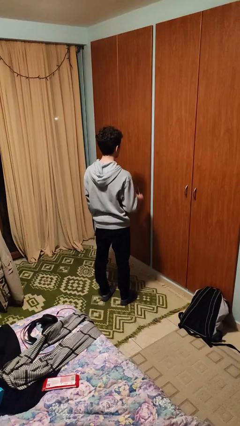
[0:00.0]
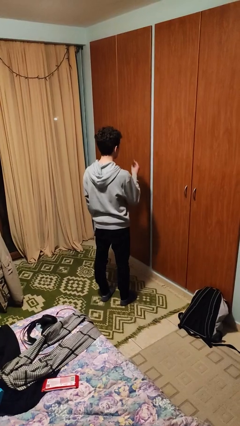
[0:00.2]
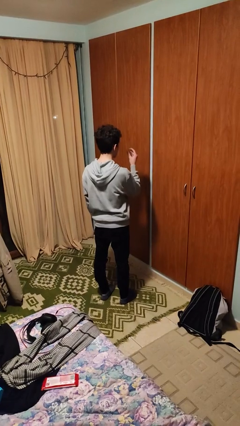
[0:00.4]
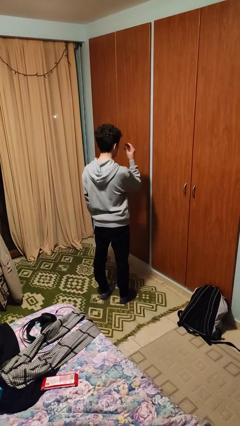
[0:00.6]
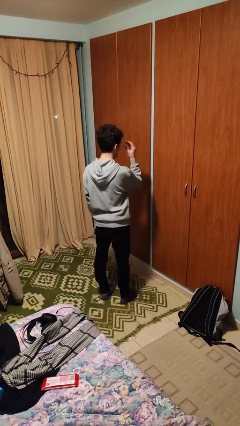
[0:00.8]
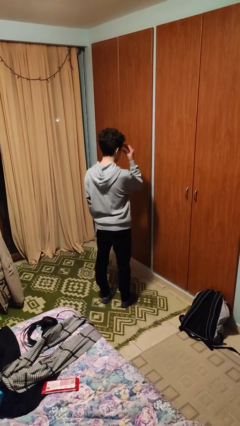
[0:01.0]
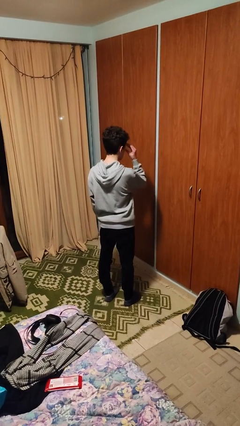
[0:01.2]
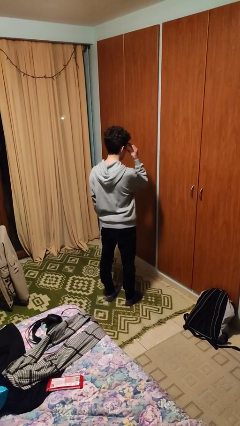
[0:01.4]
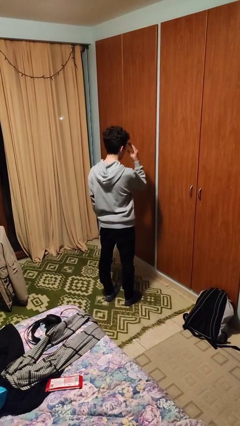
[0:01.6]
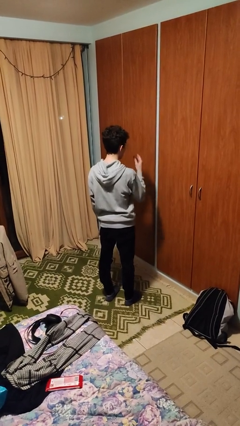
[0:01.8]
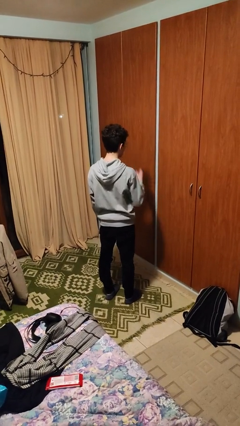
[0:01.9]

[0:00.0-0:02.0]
person puts on glasses

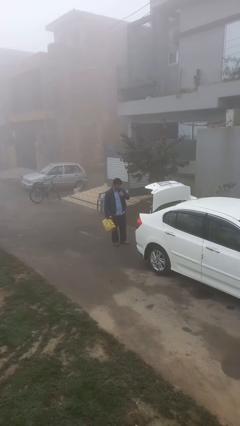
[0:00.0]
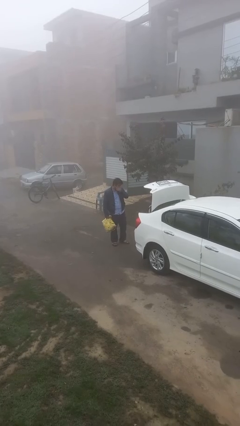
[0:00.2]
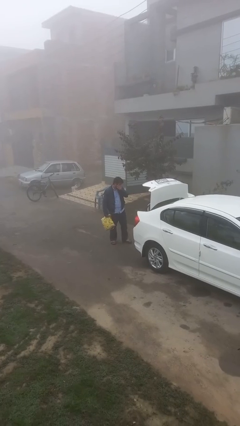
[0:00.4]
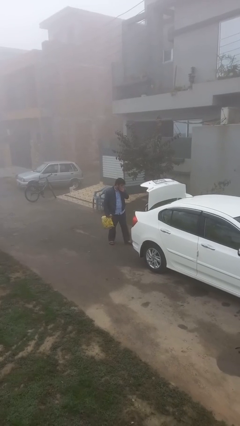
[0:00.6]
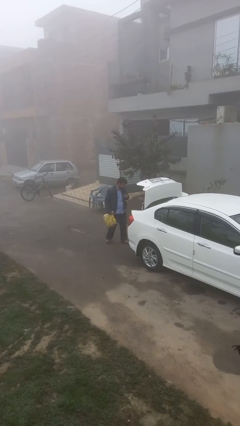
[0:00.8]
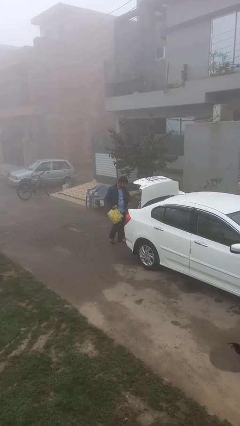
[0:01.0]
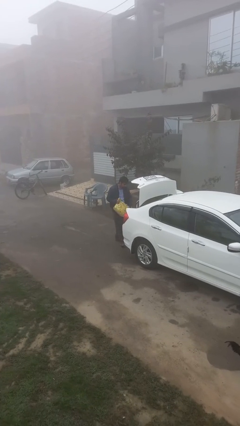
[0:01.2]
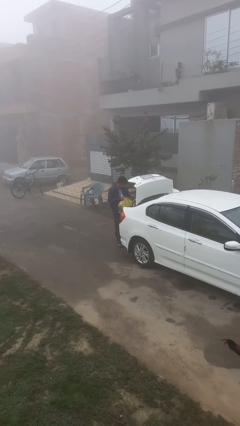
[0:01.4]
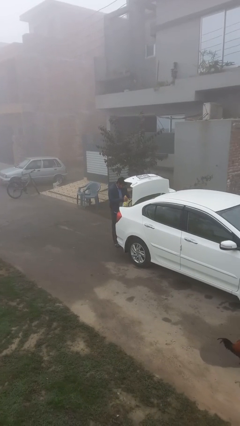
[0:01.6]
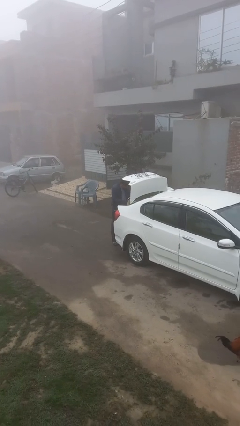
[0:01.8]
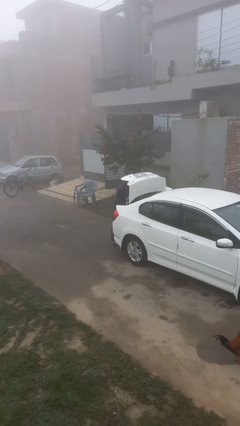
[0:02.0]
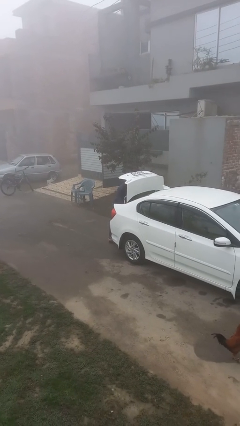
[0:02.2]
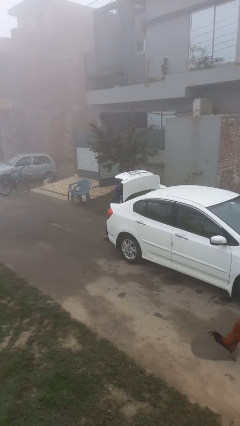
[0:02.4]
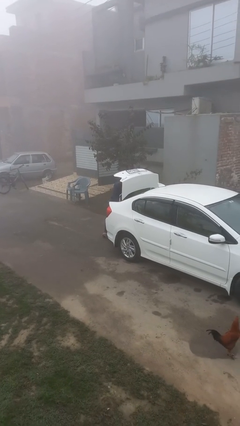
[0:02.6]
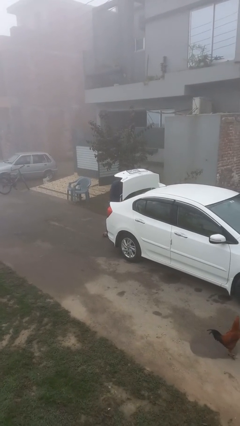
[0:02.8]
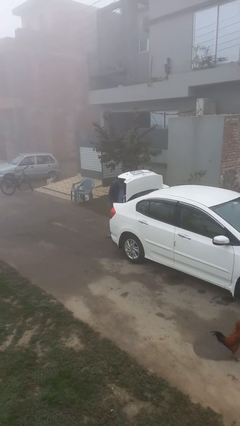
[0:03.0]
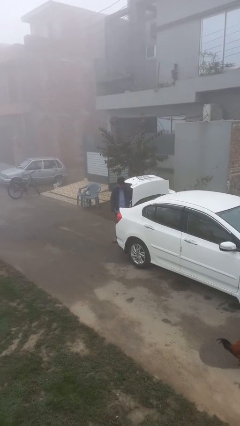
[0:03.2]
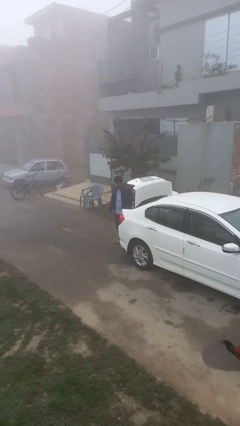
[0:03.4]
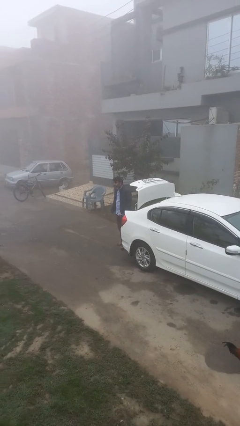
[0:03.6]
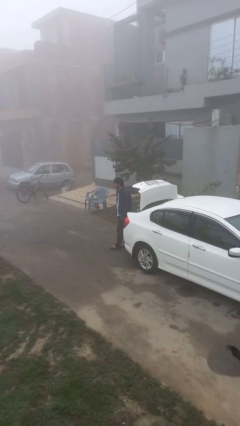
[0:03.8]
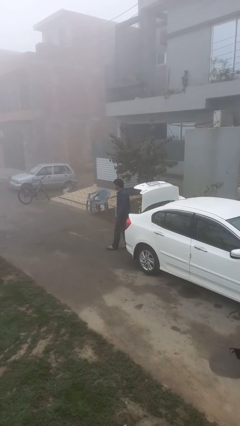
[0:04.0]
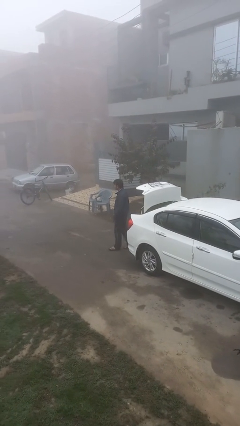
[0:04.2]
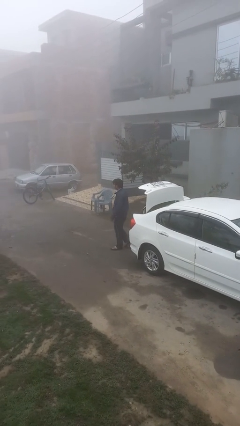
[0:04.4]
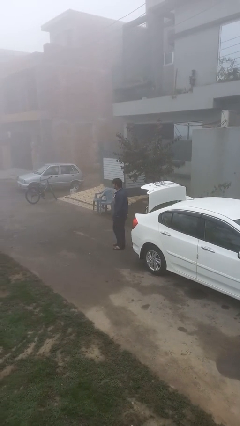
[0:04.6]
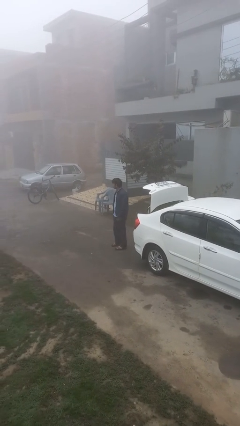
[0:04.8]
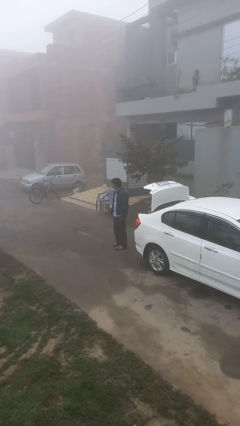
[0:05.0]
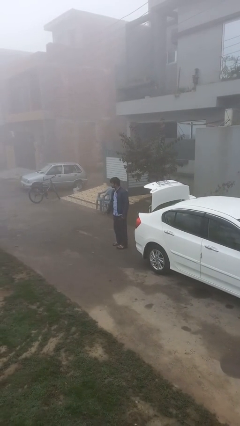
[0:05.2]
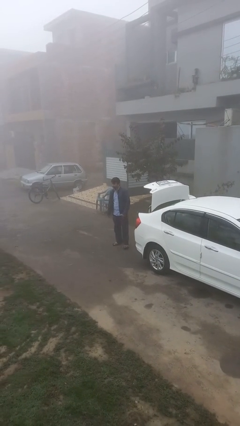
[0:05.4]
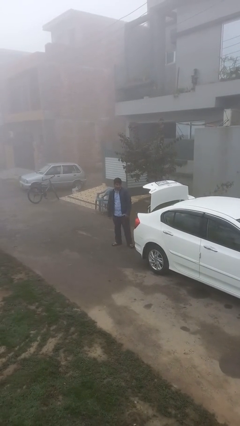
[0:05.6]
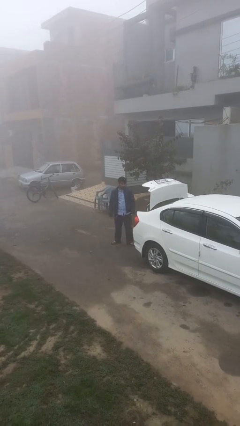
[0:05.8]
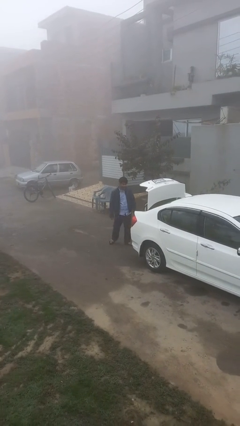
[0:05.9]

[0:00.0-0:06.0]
person loads car

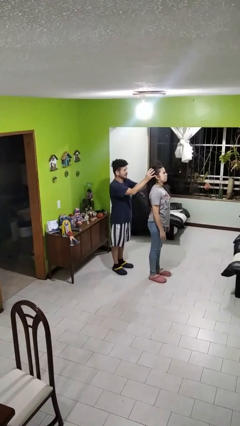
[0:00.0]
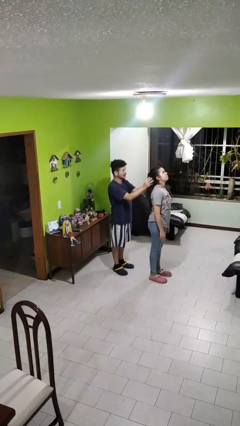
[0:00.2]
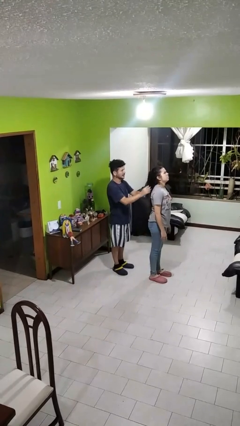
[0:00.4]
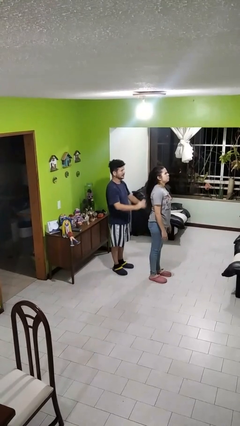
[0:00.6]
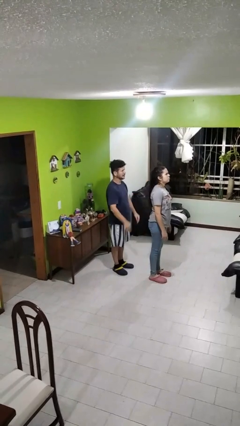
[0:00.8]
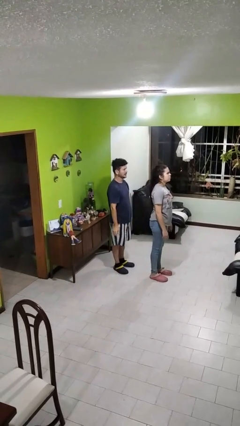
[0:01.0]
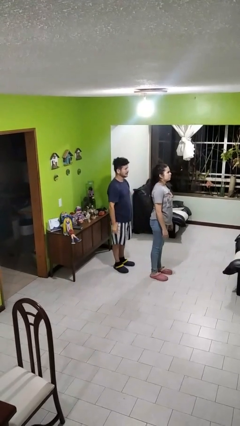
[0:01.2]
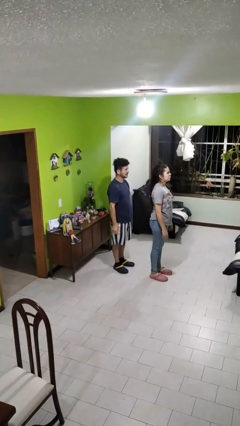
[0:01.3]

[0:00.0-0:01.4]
person grabs person by hair

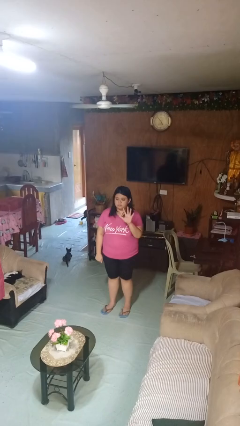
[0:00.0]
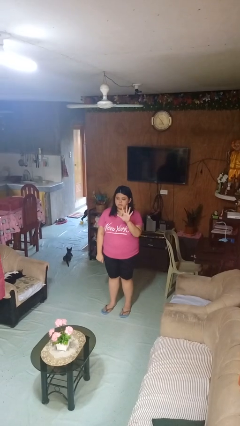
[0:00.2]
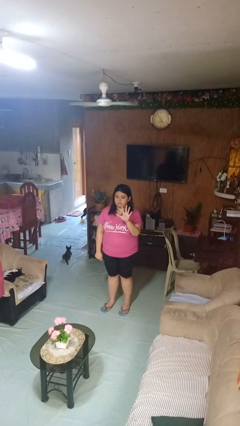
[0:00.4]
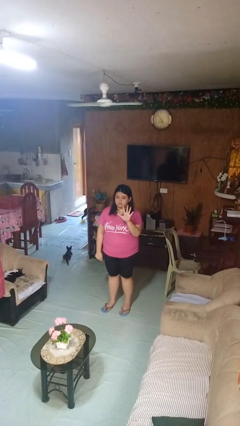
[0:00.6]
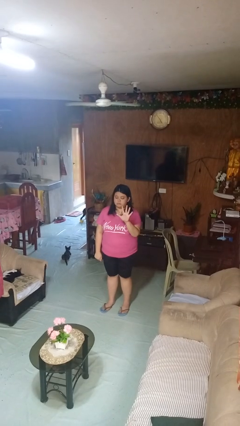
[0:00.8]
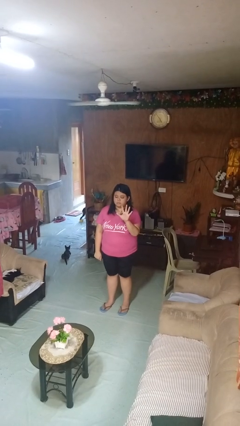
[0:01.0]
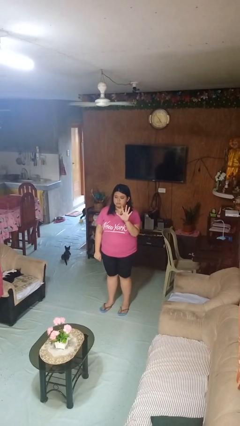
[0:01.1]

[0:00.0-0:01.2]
person gestures number five

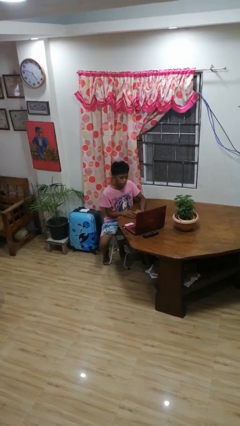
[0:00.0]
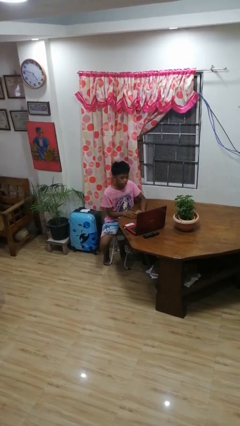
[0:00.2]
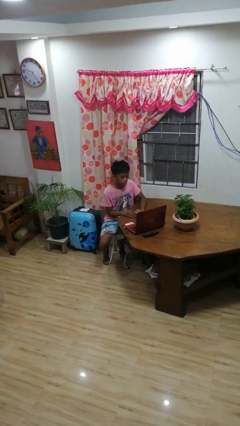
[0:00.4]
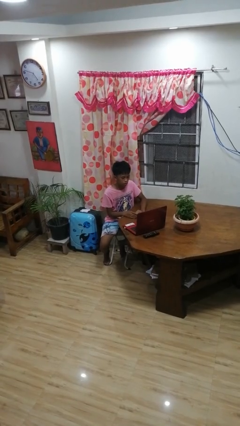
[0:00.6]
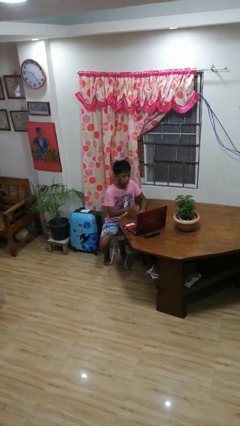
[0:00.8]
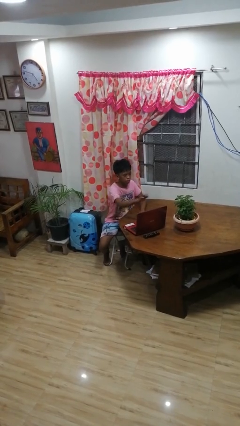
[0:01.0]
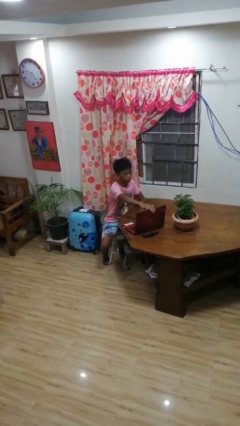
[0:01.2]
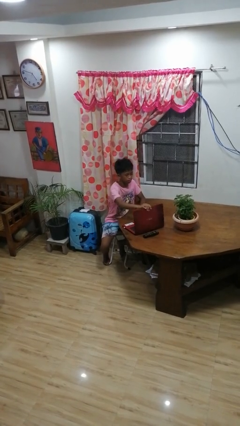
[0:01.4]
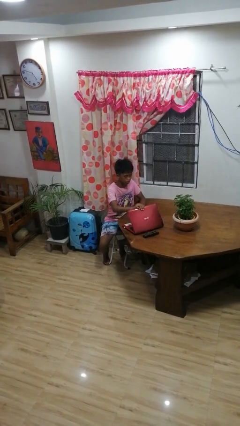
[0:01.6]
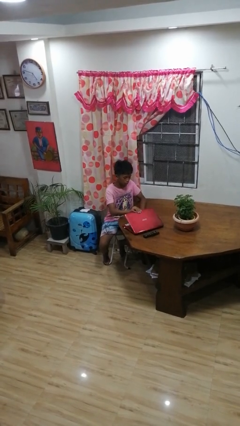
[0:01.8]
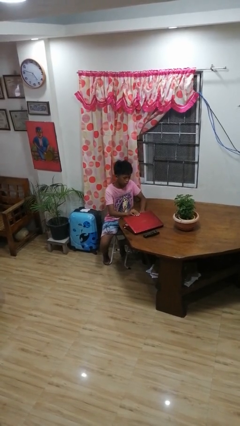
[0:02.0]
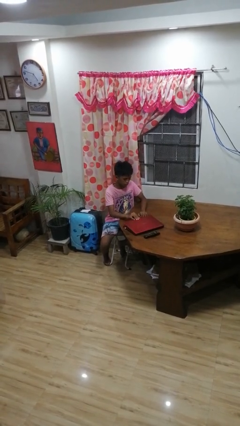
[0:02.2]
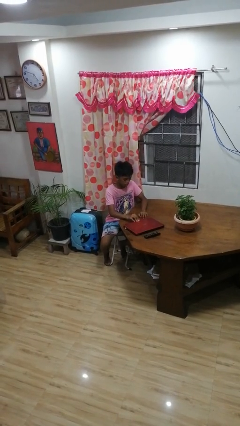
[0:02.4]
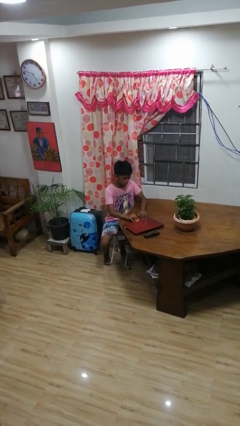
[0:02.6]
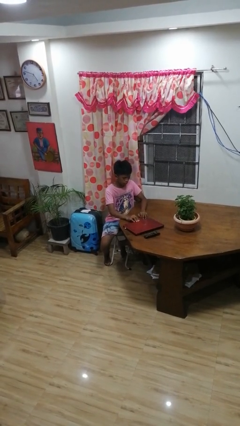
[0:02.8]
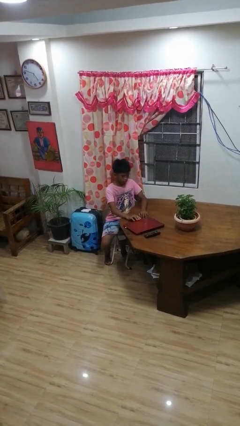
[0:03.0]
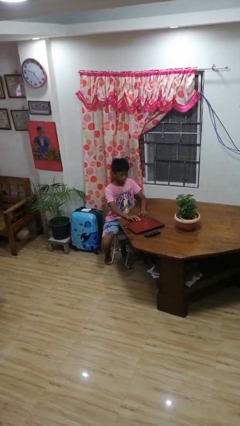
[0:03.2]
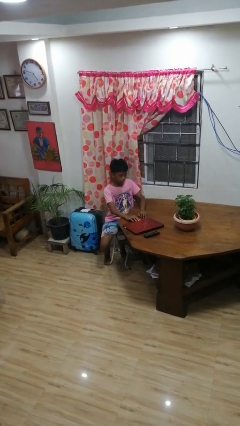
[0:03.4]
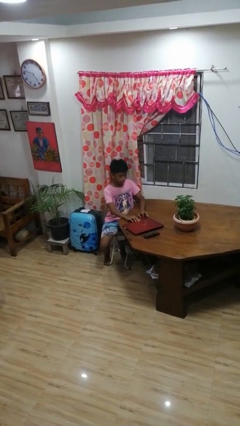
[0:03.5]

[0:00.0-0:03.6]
person closes laptop
